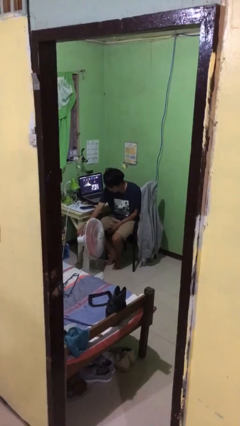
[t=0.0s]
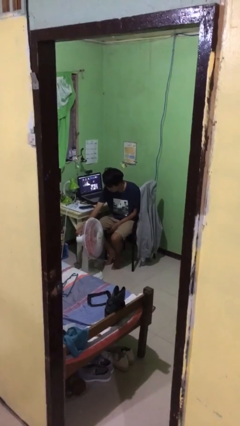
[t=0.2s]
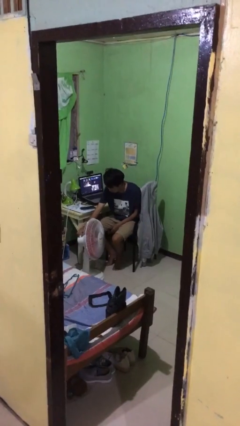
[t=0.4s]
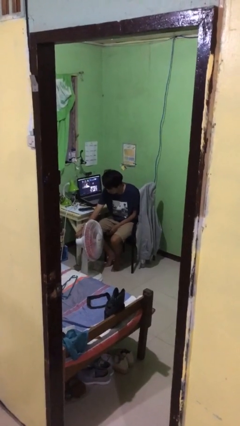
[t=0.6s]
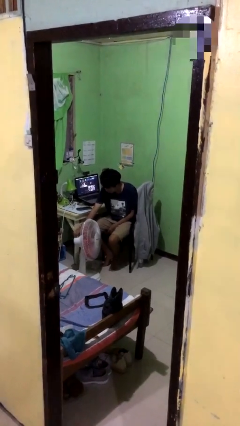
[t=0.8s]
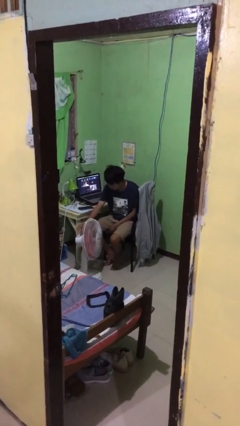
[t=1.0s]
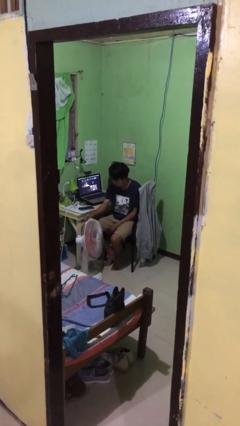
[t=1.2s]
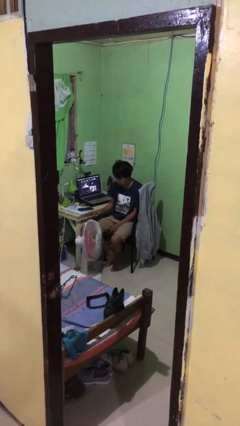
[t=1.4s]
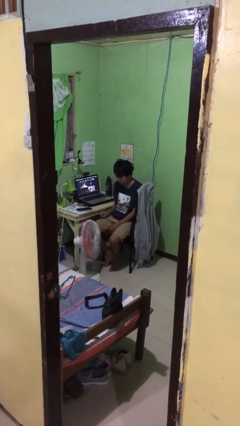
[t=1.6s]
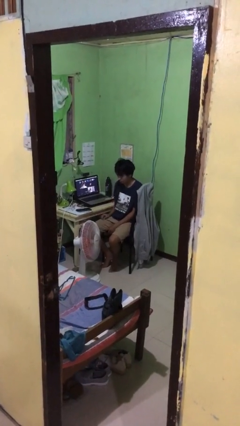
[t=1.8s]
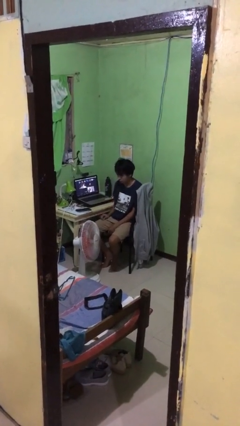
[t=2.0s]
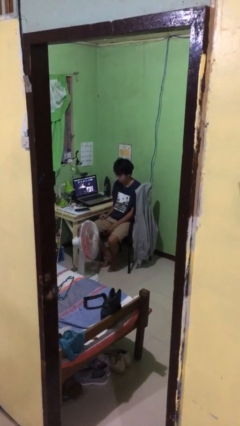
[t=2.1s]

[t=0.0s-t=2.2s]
person turns off fan

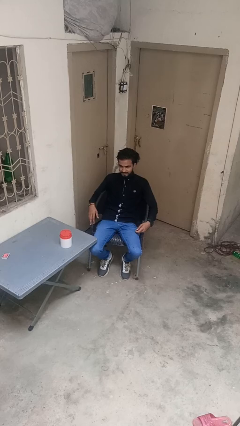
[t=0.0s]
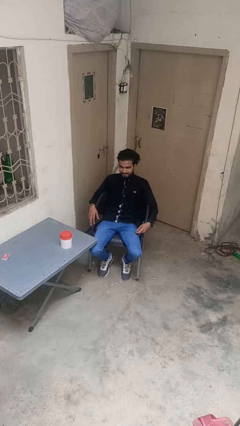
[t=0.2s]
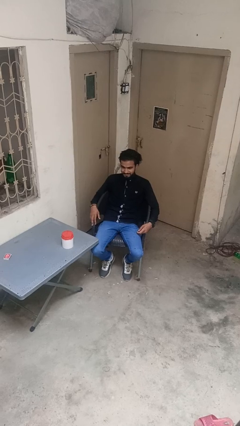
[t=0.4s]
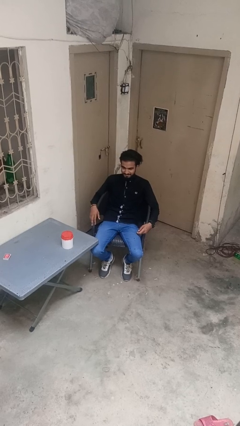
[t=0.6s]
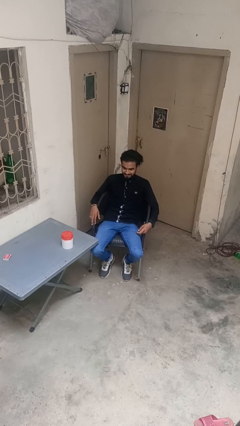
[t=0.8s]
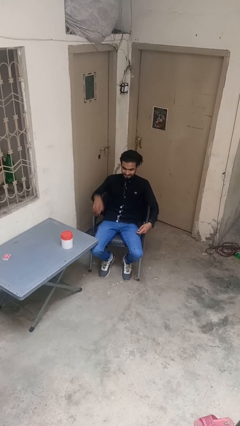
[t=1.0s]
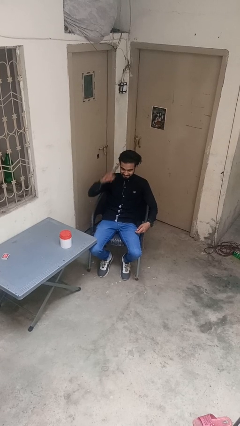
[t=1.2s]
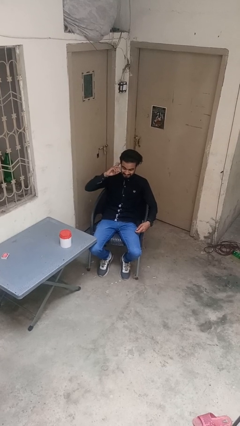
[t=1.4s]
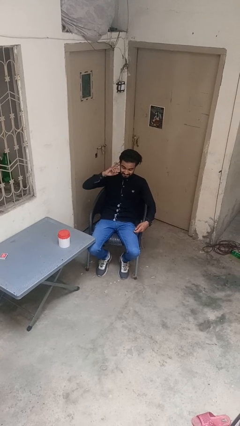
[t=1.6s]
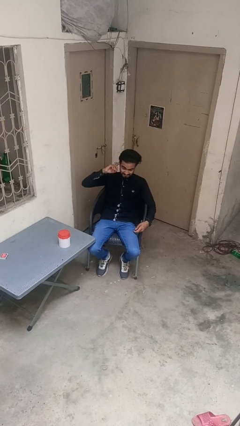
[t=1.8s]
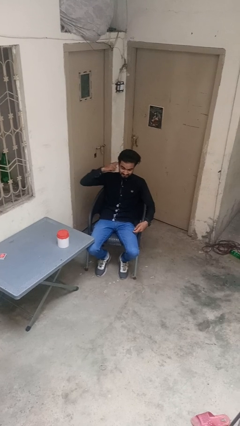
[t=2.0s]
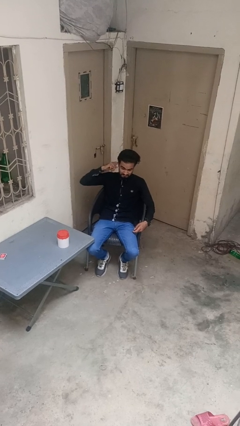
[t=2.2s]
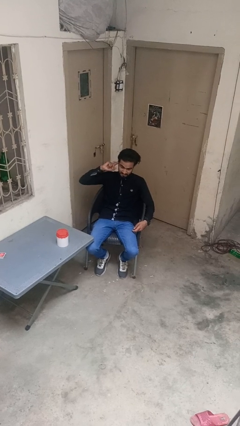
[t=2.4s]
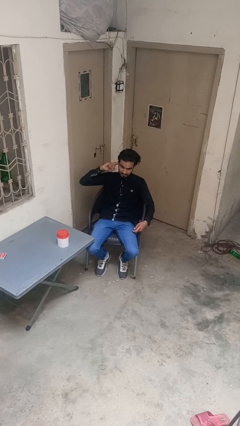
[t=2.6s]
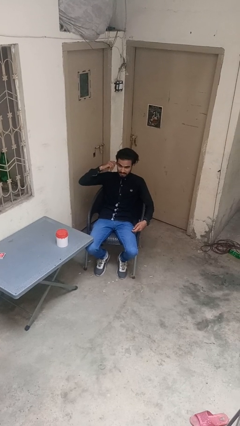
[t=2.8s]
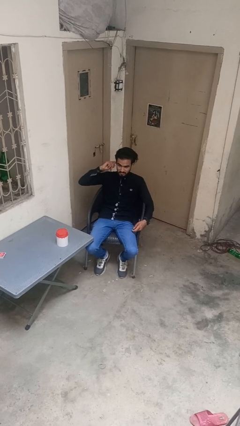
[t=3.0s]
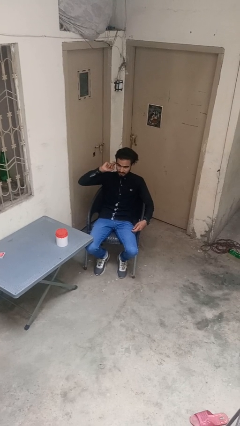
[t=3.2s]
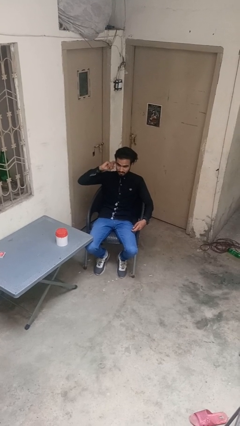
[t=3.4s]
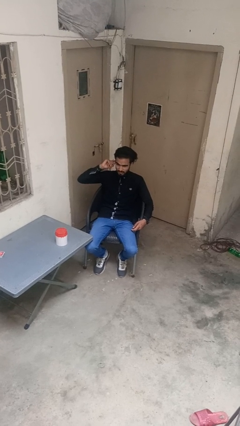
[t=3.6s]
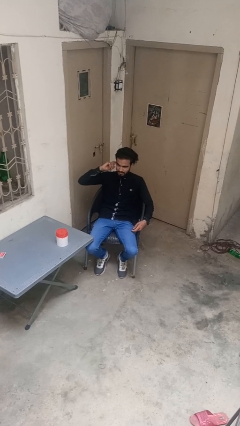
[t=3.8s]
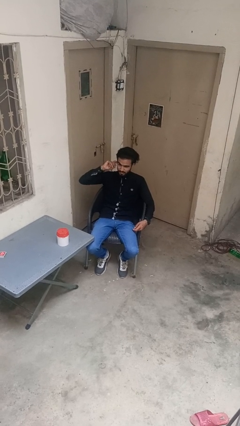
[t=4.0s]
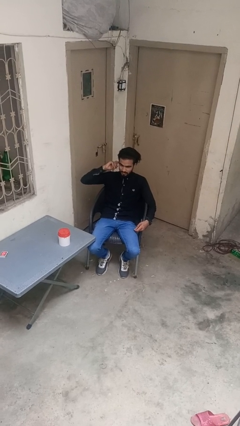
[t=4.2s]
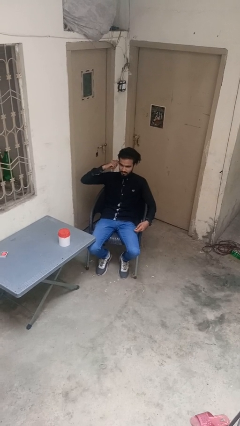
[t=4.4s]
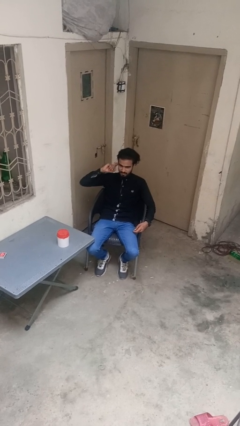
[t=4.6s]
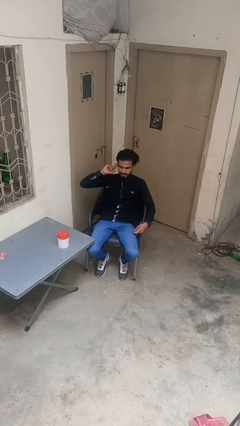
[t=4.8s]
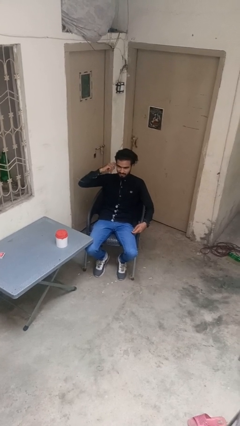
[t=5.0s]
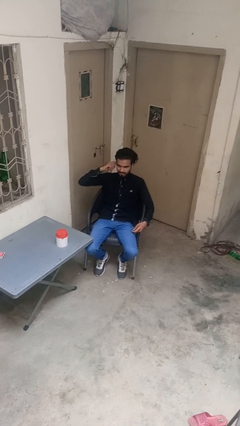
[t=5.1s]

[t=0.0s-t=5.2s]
person puts fingers in ear

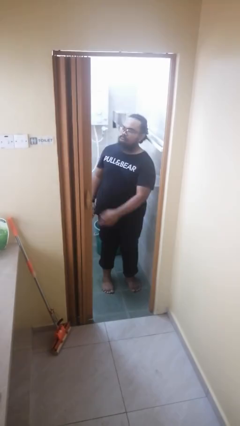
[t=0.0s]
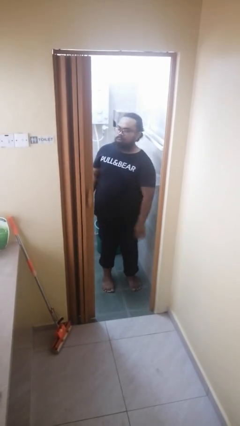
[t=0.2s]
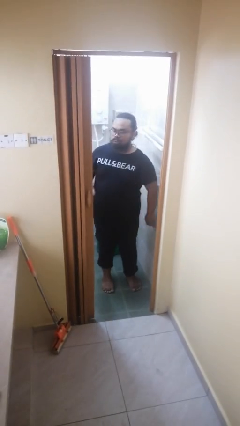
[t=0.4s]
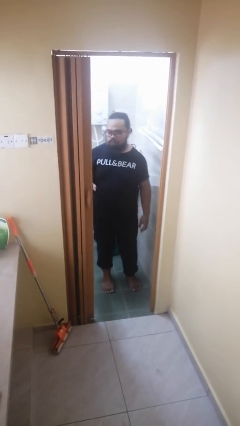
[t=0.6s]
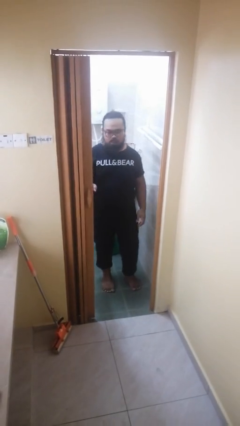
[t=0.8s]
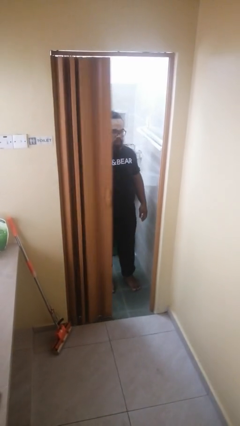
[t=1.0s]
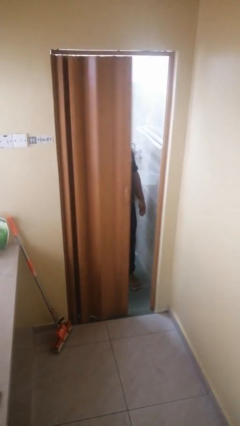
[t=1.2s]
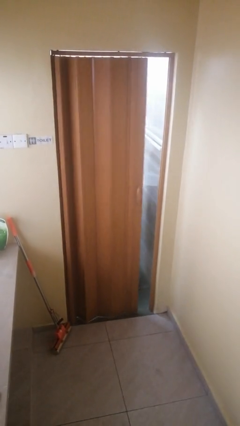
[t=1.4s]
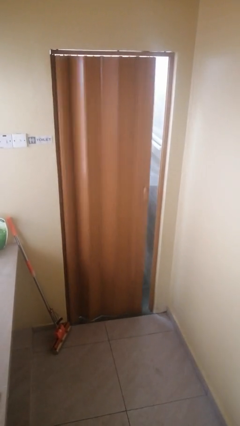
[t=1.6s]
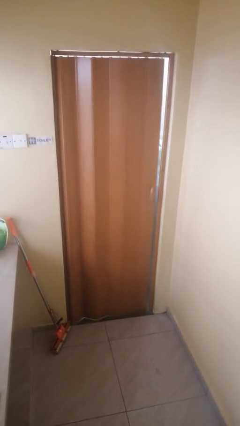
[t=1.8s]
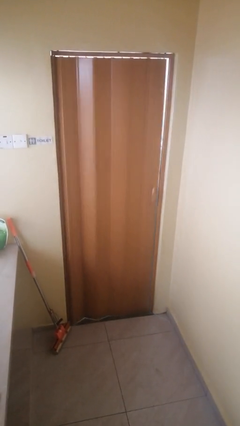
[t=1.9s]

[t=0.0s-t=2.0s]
person closes sliding door

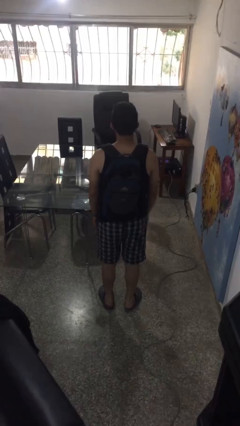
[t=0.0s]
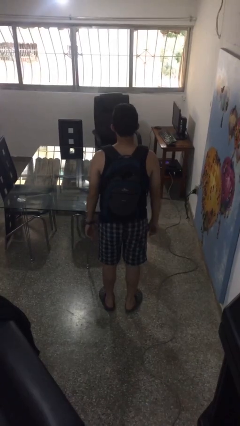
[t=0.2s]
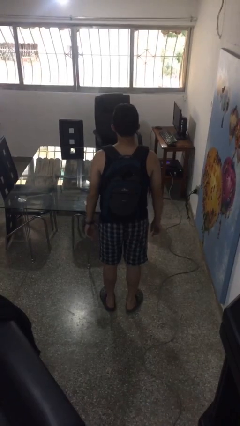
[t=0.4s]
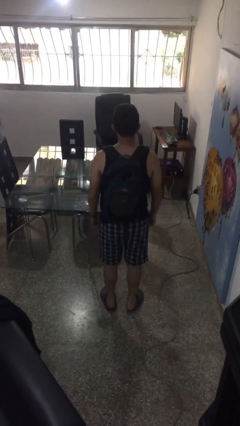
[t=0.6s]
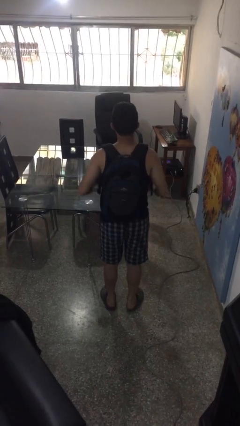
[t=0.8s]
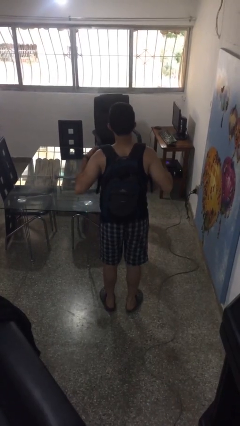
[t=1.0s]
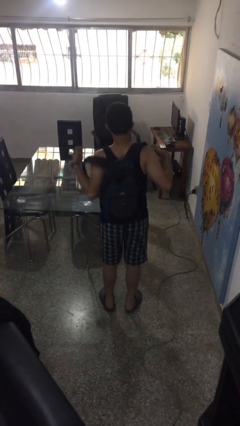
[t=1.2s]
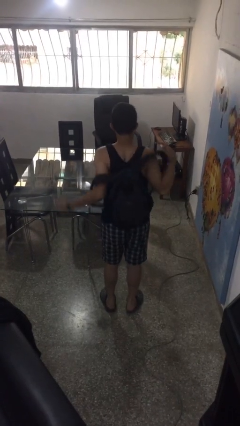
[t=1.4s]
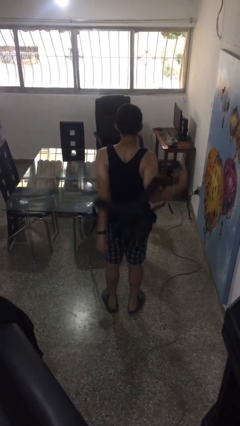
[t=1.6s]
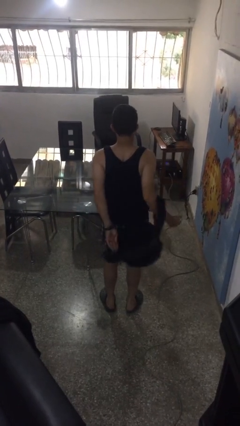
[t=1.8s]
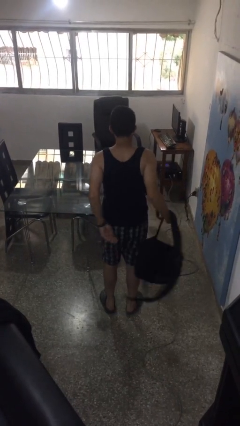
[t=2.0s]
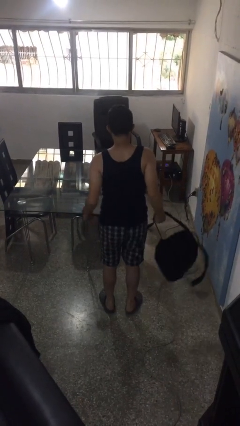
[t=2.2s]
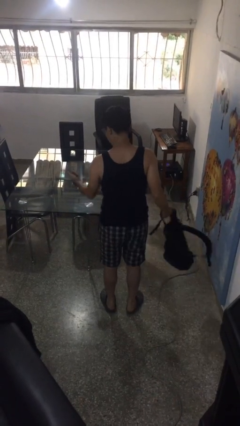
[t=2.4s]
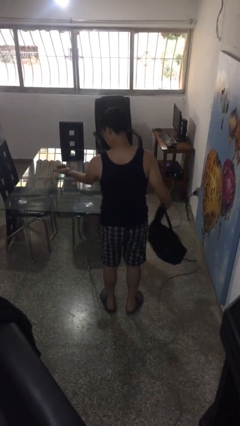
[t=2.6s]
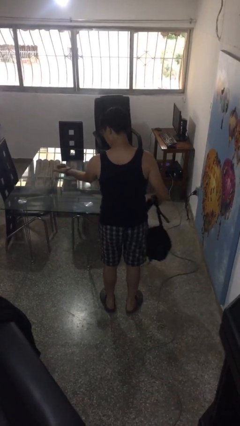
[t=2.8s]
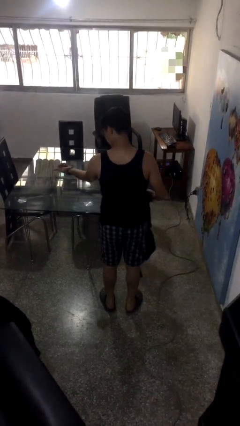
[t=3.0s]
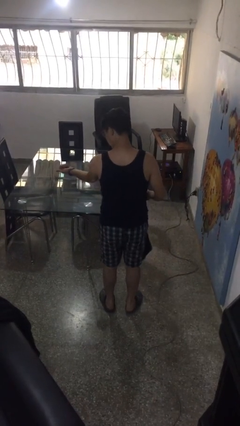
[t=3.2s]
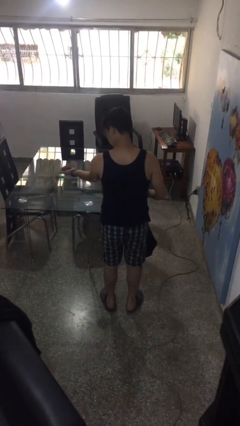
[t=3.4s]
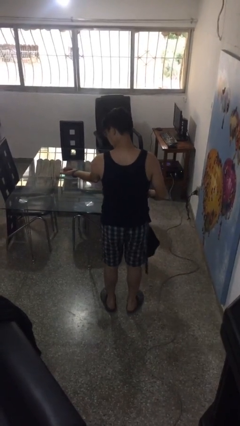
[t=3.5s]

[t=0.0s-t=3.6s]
person takes off backpack

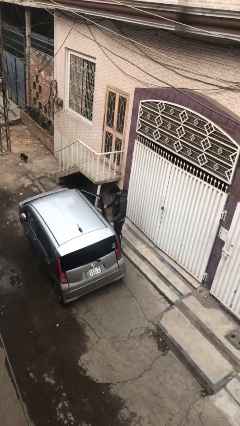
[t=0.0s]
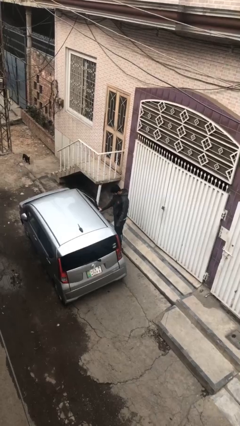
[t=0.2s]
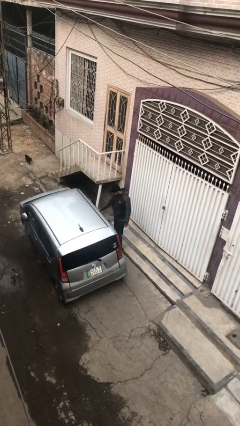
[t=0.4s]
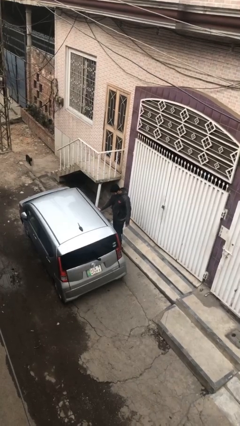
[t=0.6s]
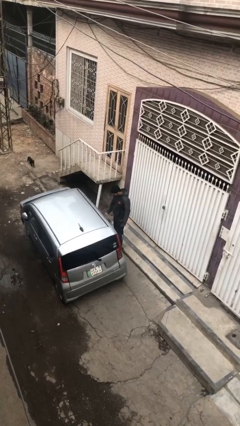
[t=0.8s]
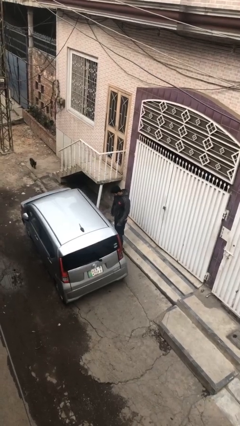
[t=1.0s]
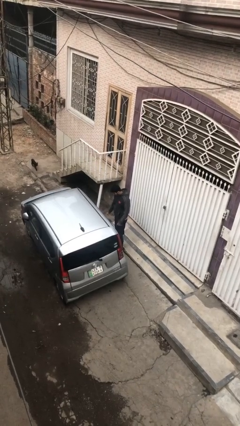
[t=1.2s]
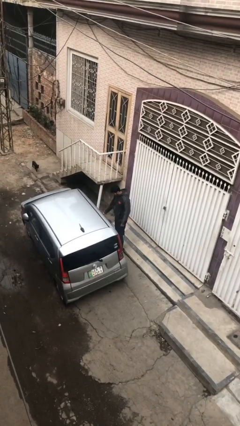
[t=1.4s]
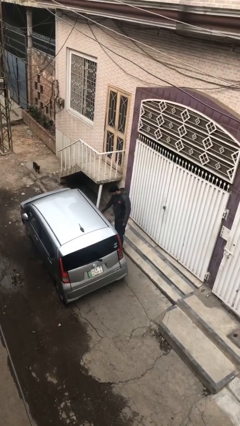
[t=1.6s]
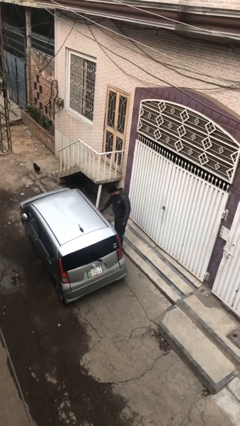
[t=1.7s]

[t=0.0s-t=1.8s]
person closes car door

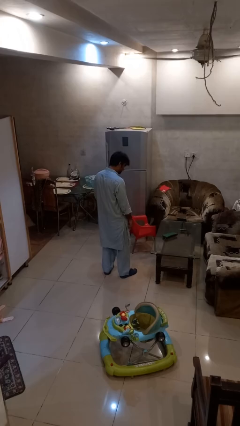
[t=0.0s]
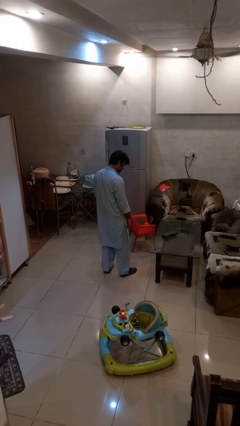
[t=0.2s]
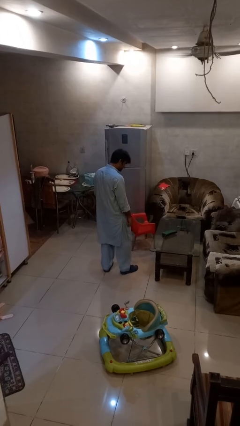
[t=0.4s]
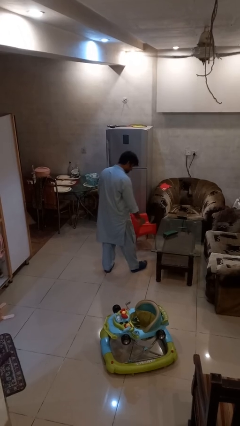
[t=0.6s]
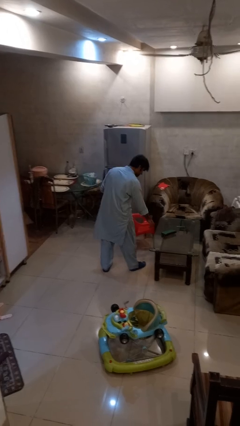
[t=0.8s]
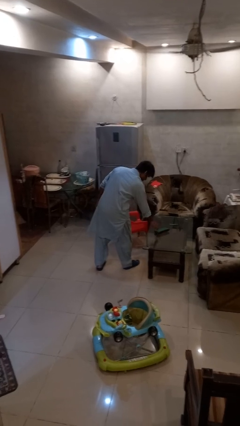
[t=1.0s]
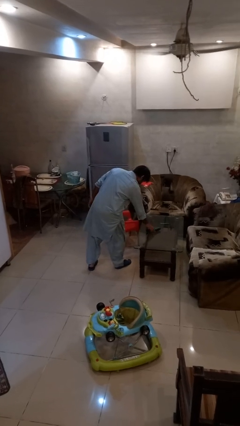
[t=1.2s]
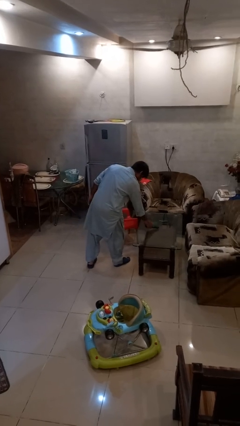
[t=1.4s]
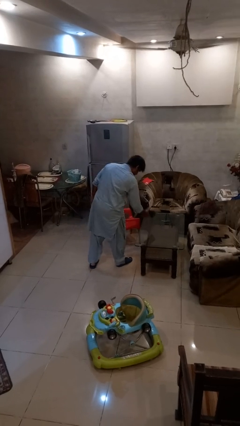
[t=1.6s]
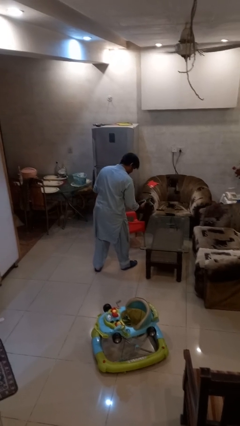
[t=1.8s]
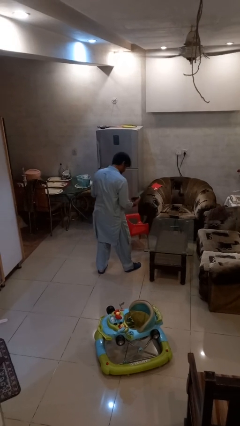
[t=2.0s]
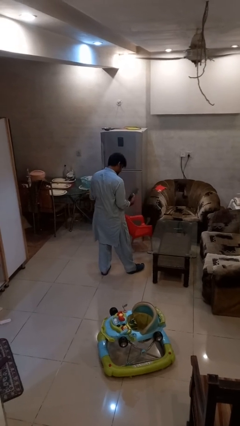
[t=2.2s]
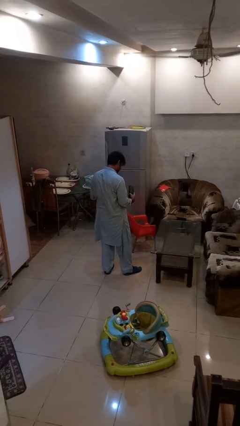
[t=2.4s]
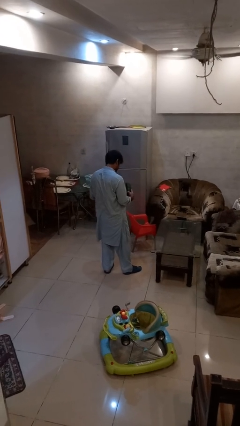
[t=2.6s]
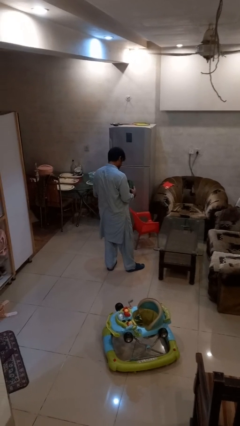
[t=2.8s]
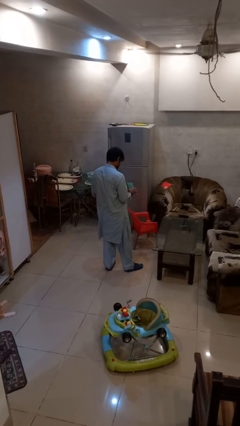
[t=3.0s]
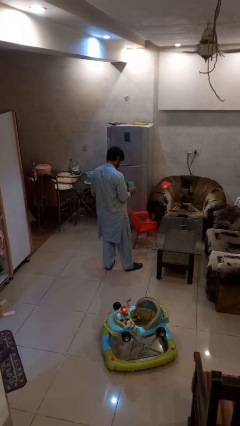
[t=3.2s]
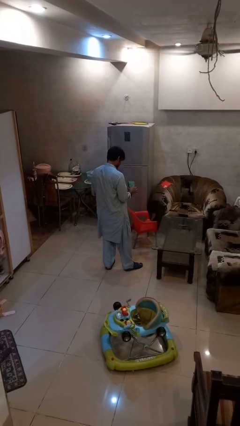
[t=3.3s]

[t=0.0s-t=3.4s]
person picks up object from table
